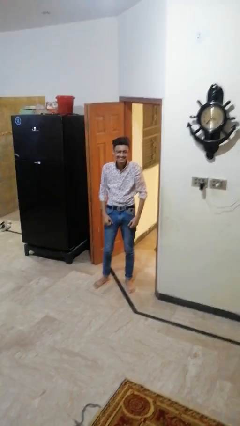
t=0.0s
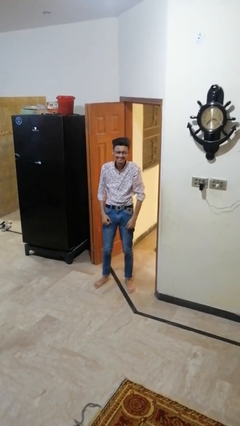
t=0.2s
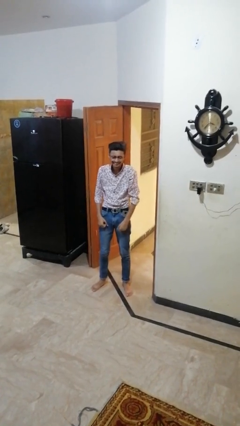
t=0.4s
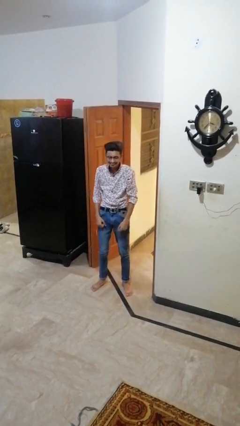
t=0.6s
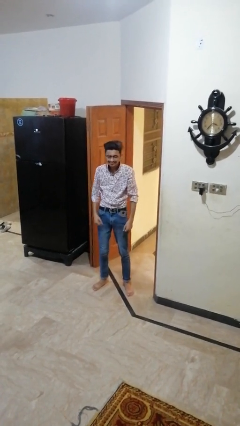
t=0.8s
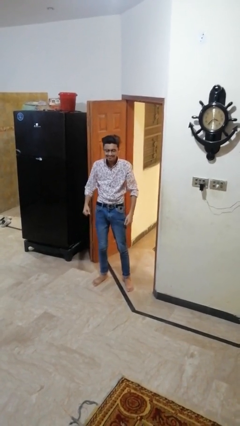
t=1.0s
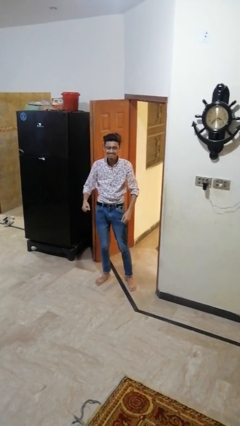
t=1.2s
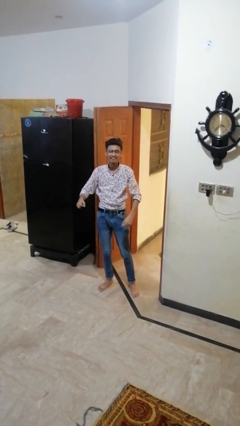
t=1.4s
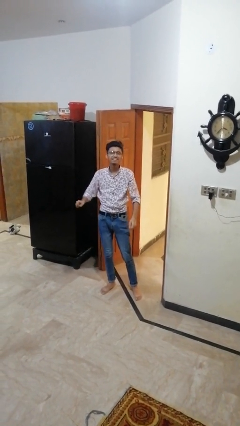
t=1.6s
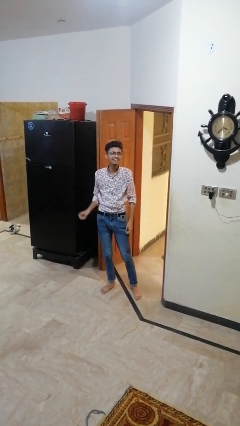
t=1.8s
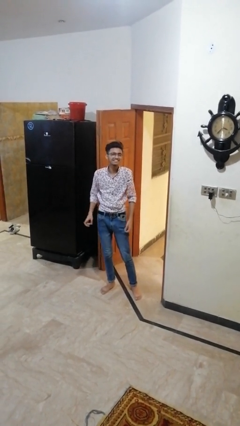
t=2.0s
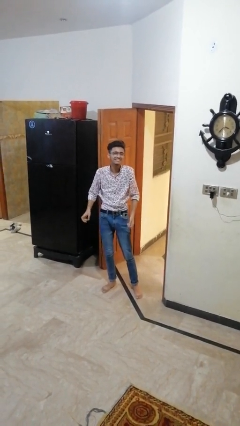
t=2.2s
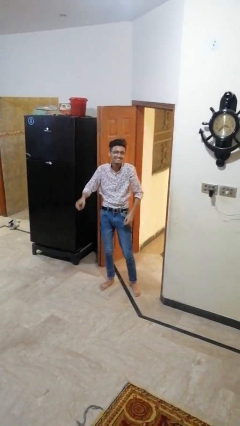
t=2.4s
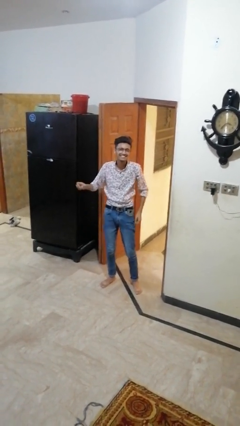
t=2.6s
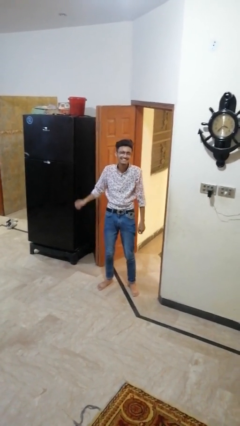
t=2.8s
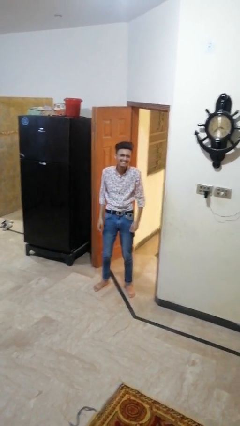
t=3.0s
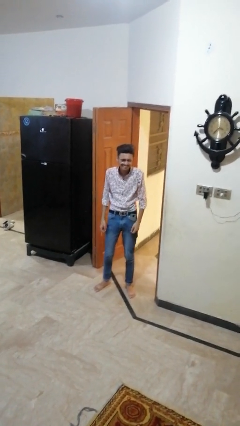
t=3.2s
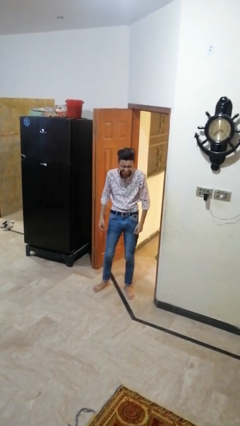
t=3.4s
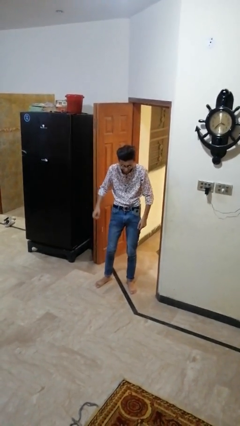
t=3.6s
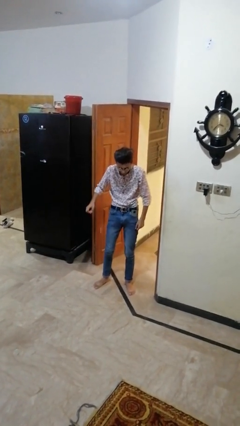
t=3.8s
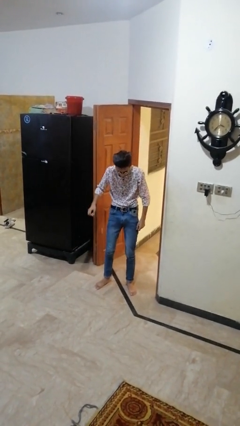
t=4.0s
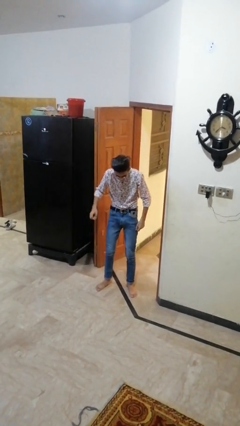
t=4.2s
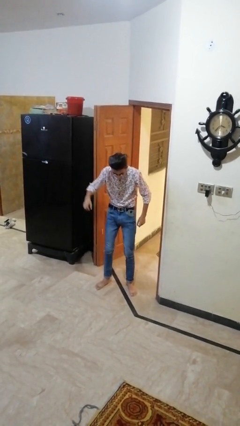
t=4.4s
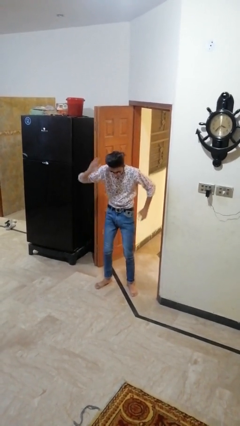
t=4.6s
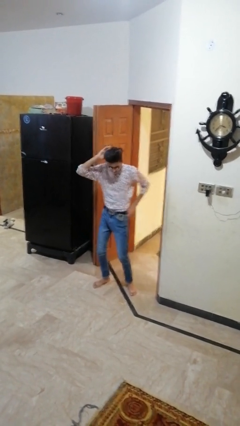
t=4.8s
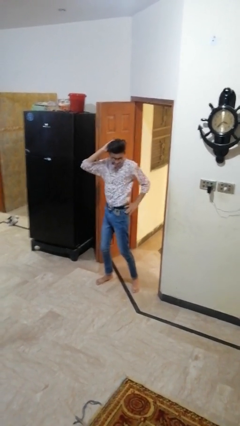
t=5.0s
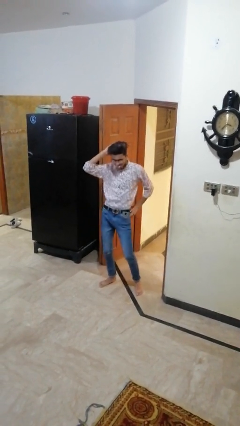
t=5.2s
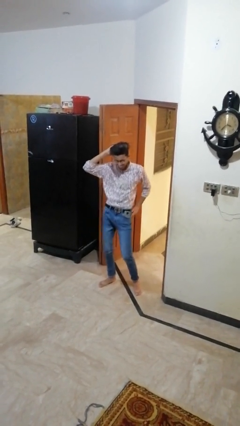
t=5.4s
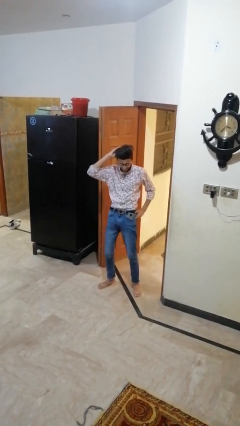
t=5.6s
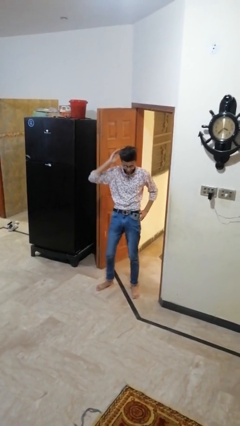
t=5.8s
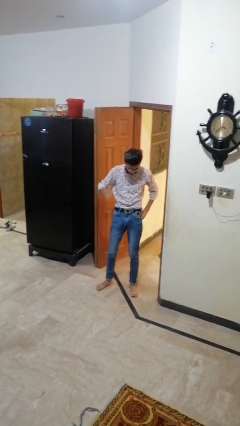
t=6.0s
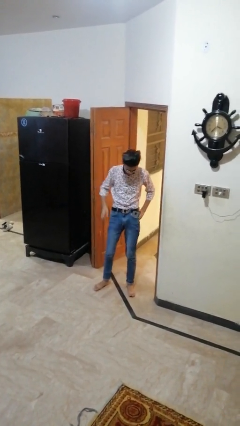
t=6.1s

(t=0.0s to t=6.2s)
person dances in place

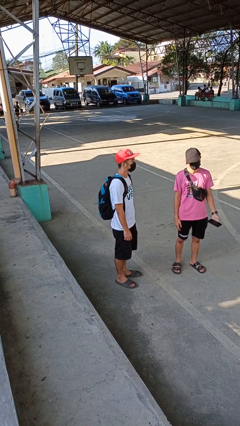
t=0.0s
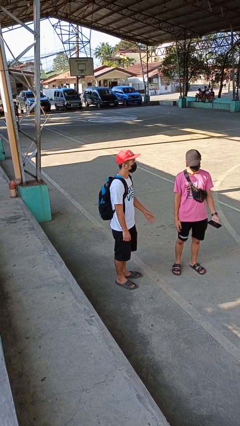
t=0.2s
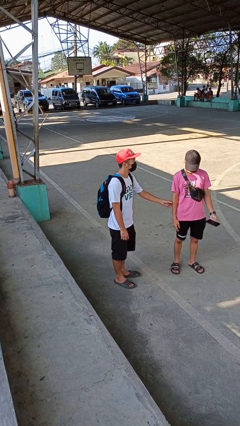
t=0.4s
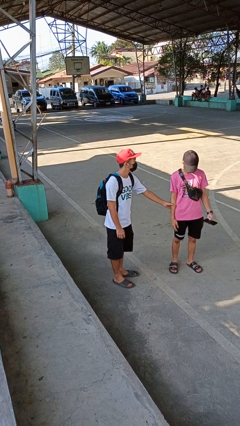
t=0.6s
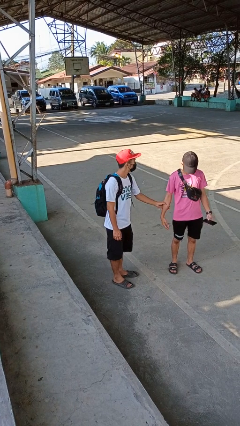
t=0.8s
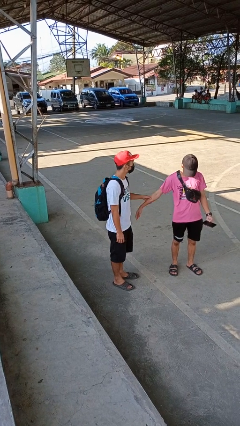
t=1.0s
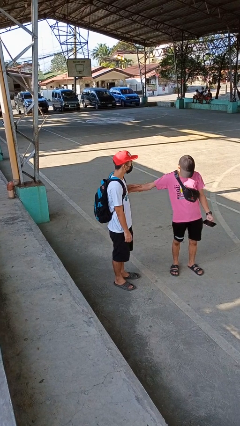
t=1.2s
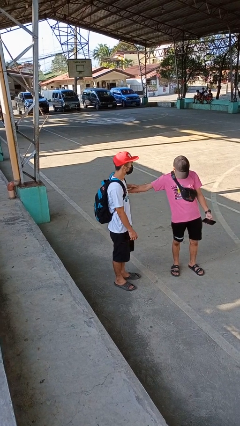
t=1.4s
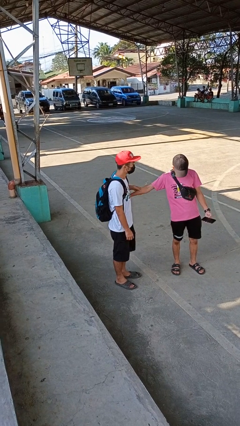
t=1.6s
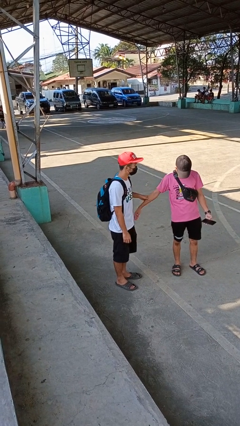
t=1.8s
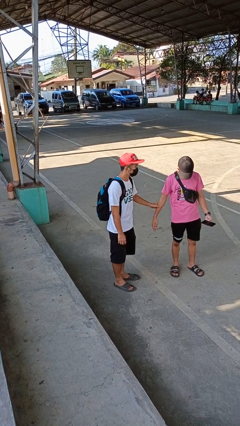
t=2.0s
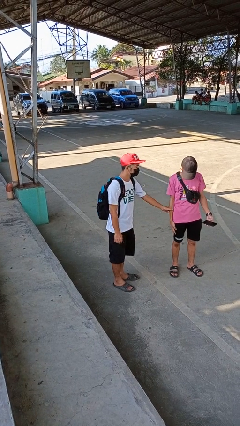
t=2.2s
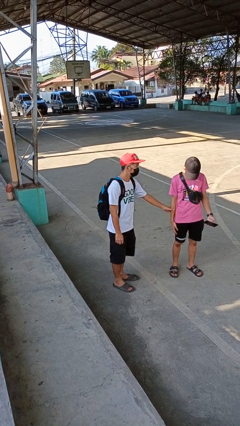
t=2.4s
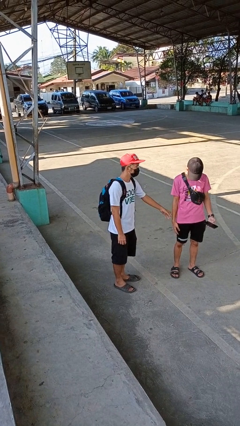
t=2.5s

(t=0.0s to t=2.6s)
person grabs person by forearm

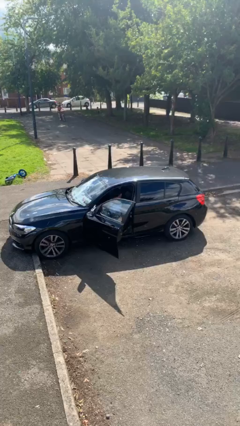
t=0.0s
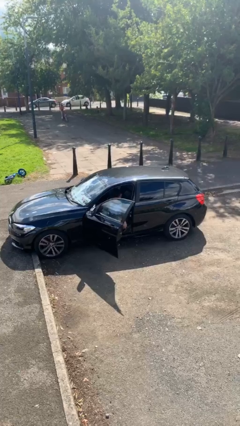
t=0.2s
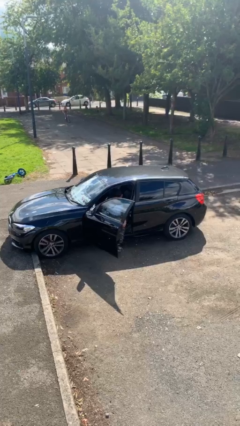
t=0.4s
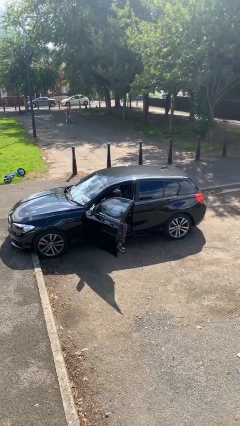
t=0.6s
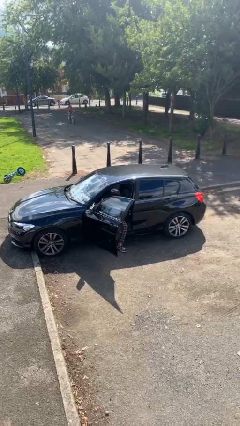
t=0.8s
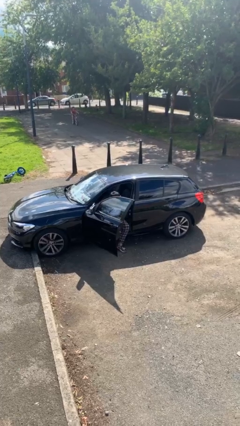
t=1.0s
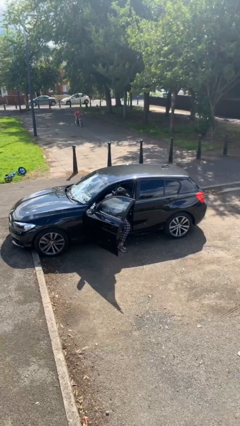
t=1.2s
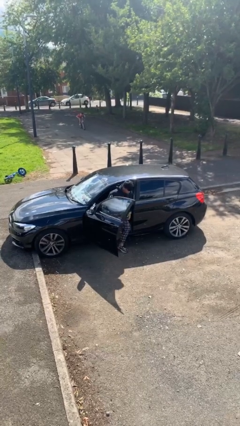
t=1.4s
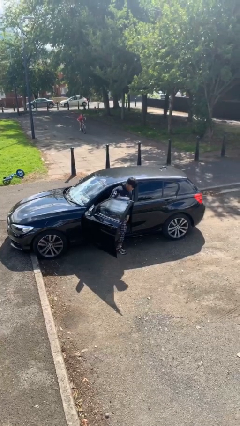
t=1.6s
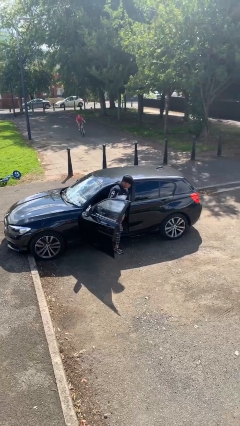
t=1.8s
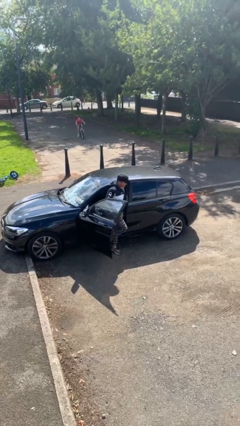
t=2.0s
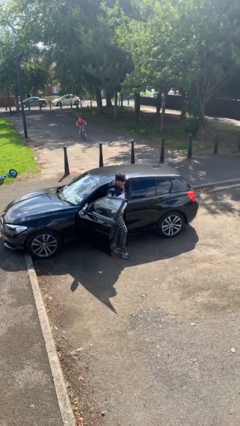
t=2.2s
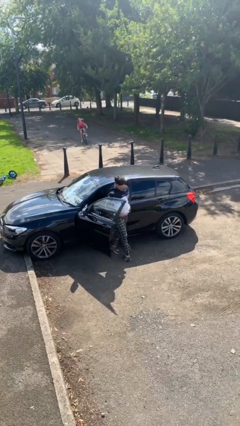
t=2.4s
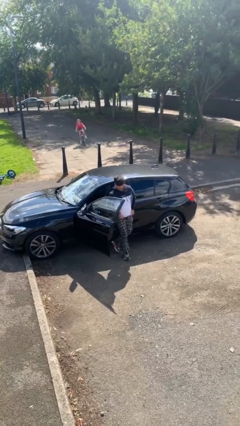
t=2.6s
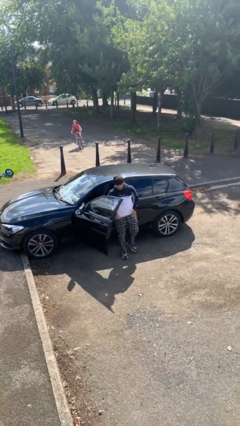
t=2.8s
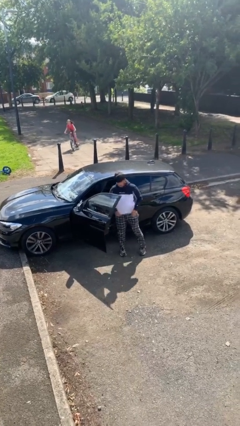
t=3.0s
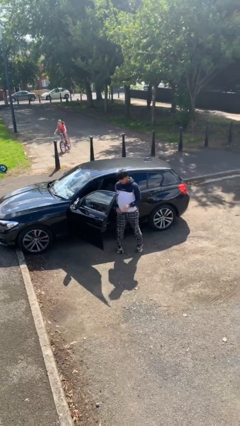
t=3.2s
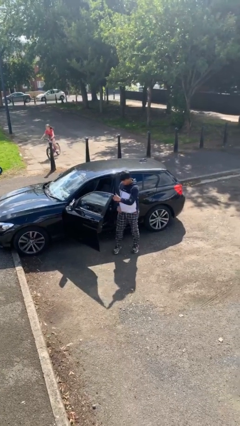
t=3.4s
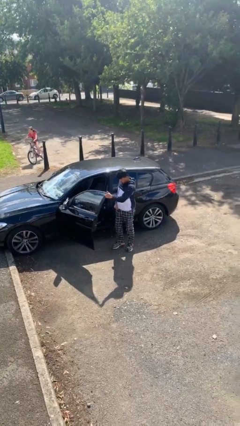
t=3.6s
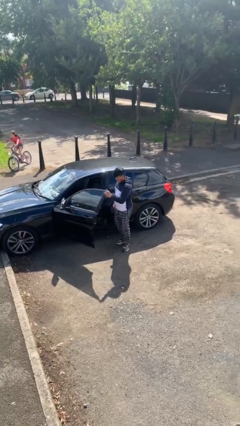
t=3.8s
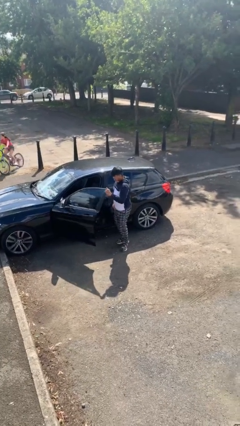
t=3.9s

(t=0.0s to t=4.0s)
person exits car

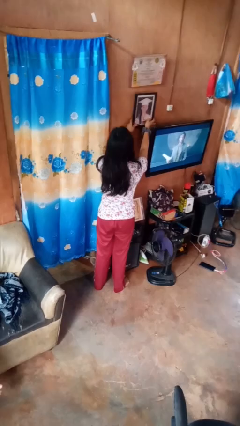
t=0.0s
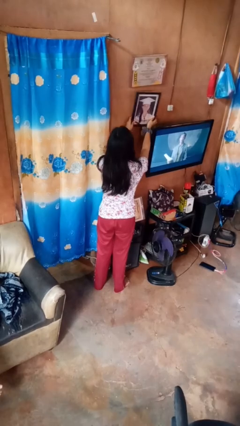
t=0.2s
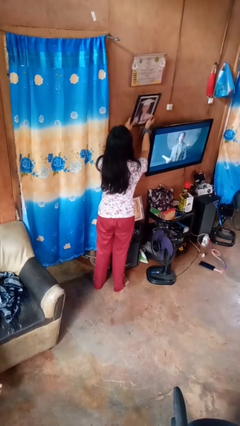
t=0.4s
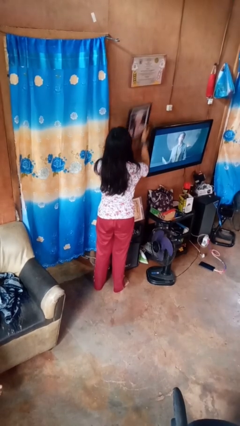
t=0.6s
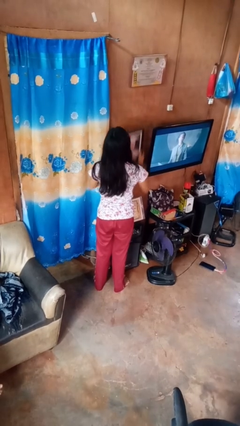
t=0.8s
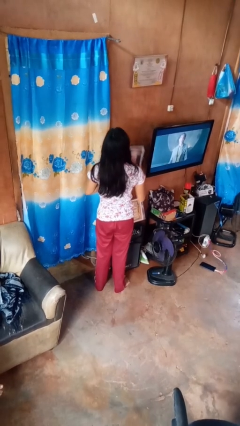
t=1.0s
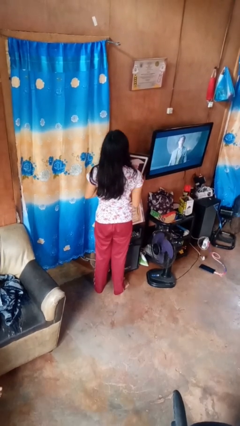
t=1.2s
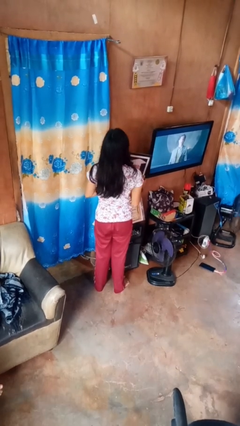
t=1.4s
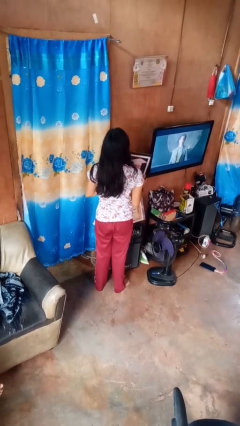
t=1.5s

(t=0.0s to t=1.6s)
person takes down picture frame

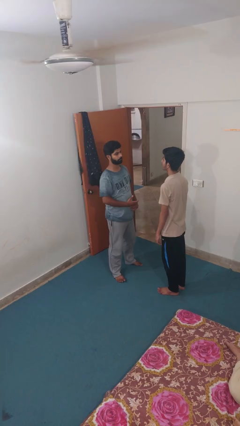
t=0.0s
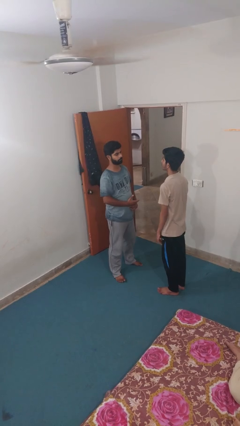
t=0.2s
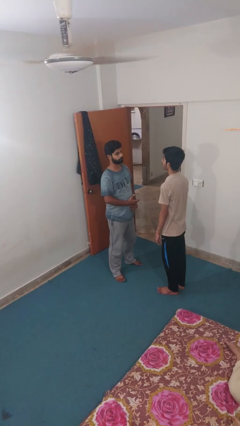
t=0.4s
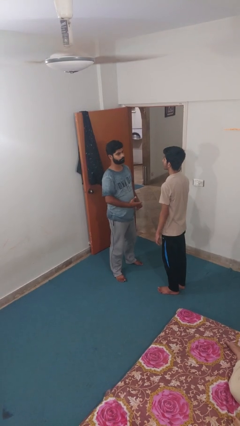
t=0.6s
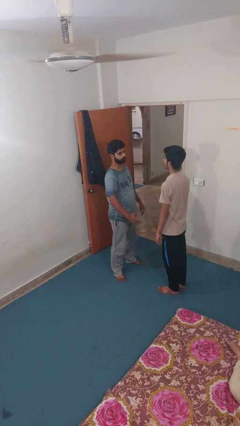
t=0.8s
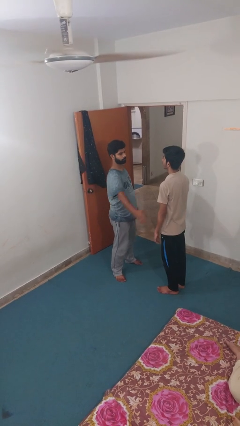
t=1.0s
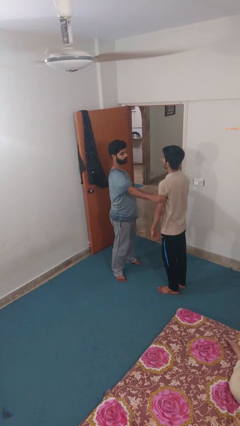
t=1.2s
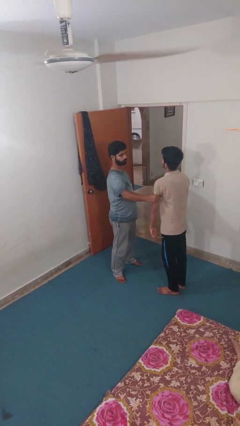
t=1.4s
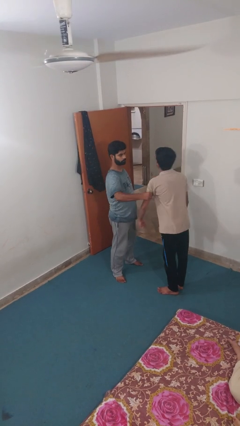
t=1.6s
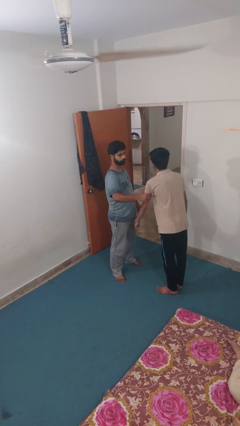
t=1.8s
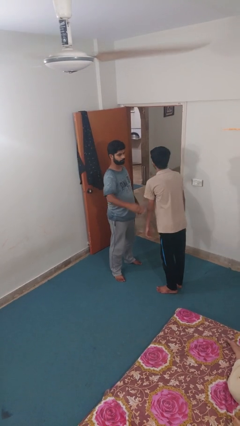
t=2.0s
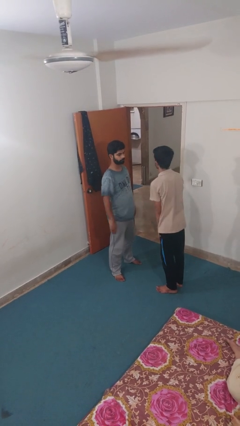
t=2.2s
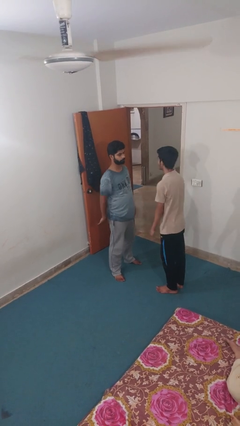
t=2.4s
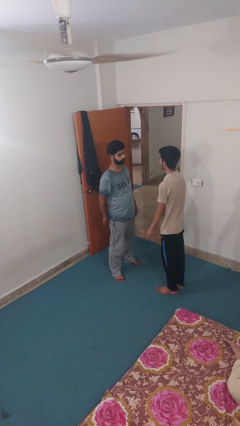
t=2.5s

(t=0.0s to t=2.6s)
person grabs person by bicep

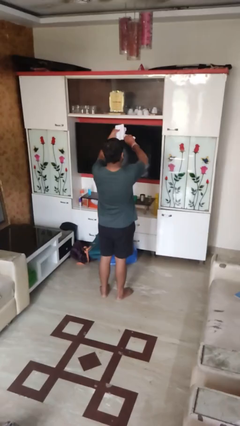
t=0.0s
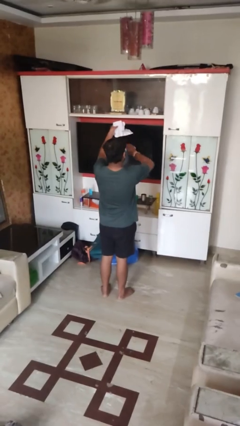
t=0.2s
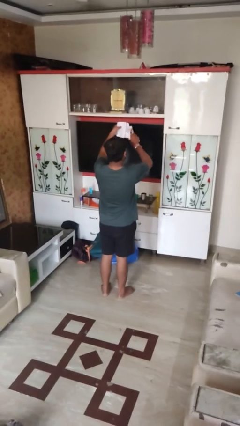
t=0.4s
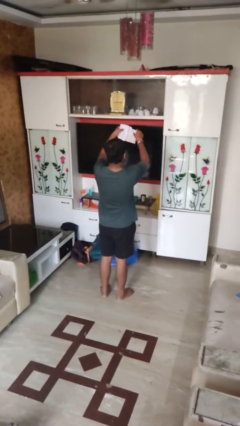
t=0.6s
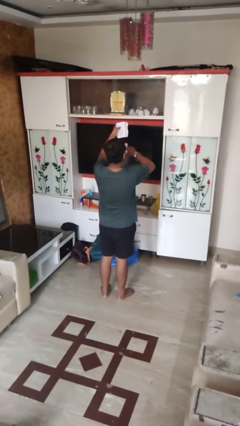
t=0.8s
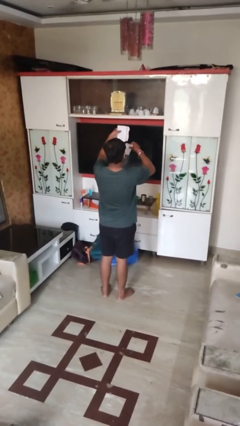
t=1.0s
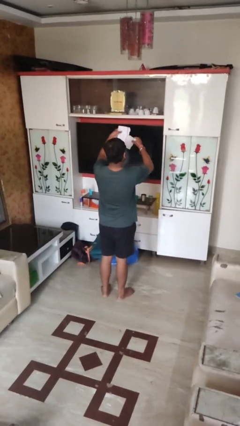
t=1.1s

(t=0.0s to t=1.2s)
person tears paper
